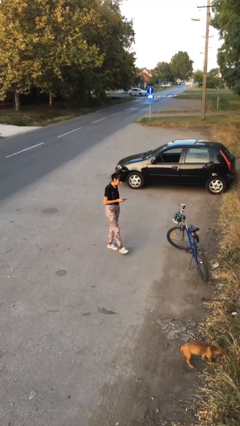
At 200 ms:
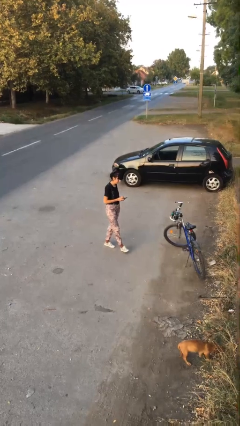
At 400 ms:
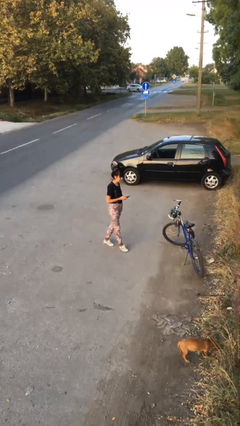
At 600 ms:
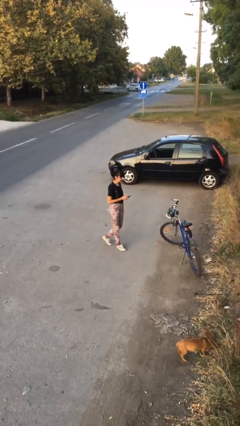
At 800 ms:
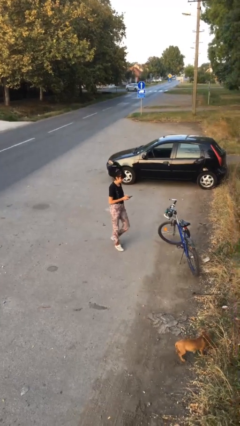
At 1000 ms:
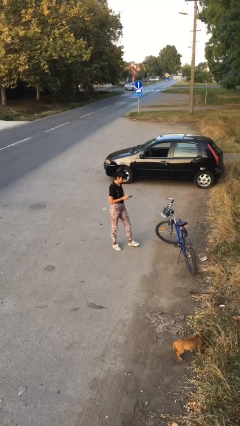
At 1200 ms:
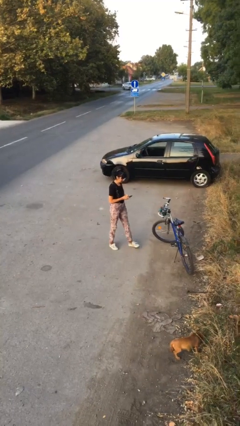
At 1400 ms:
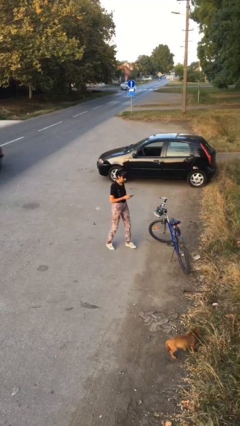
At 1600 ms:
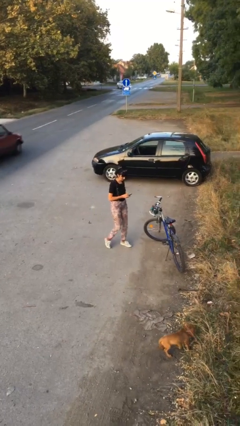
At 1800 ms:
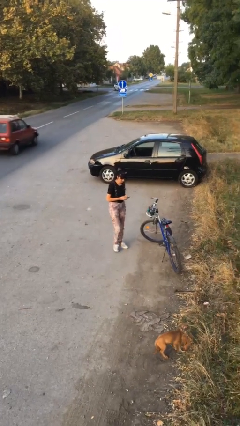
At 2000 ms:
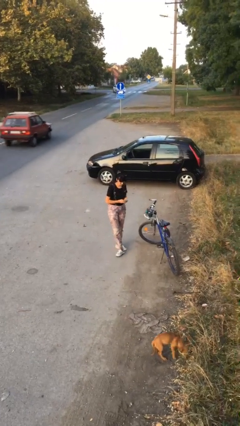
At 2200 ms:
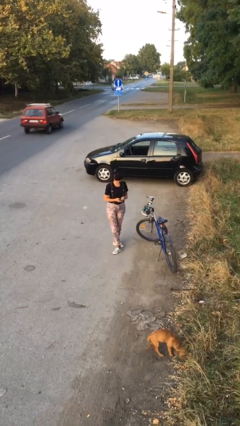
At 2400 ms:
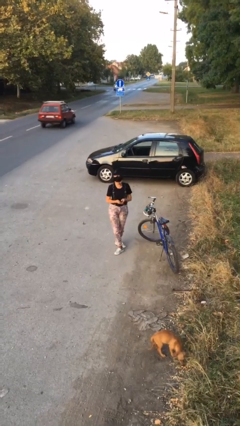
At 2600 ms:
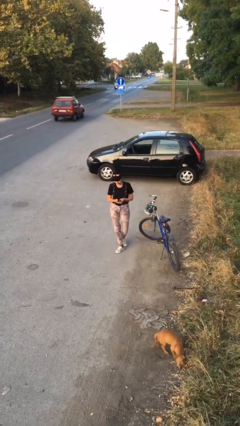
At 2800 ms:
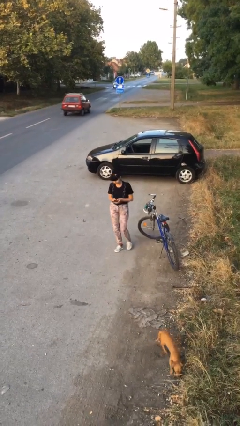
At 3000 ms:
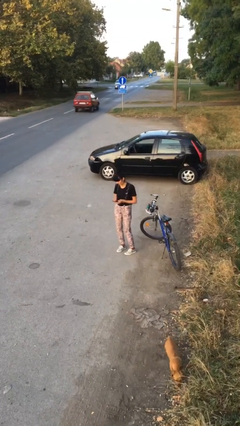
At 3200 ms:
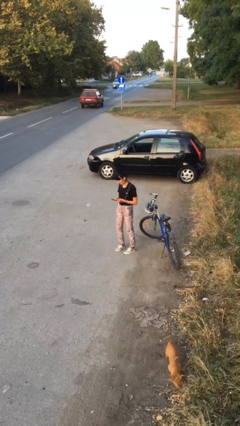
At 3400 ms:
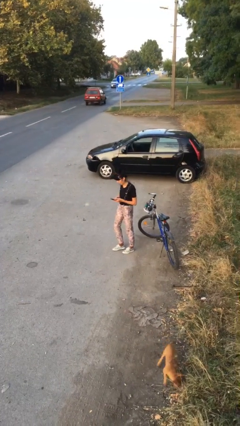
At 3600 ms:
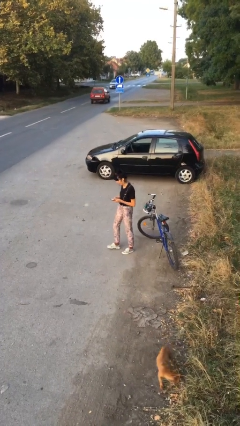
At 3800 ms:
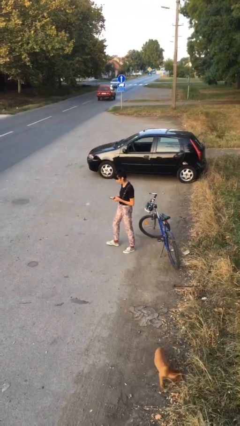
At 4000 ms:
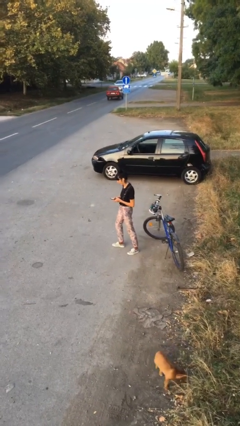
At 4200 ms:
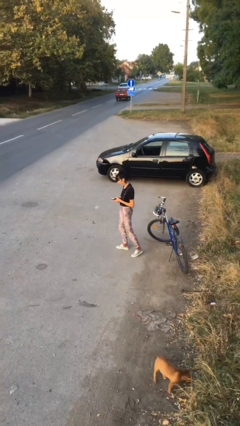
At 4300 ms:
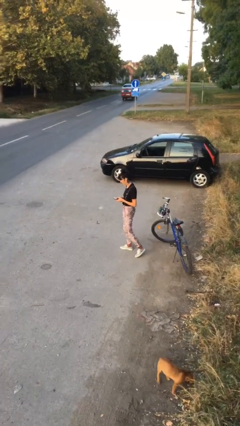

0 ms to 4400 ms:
person texts on phone

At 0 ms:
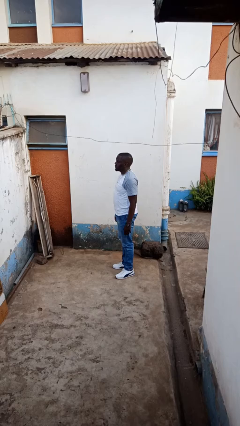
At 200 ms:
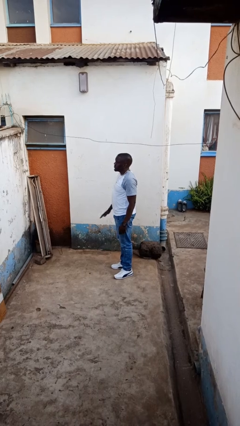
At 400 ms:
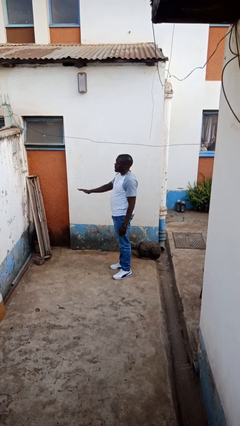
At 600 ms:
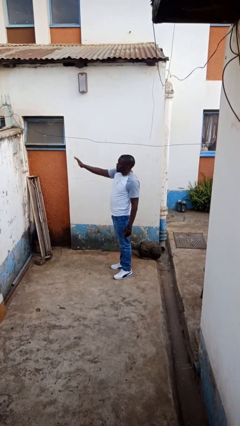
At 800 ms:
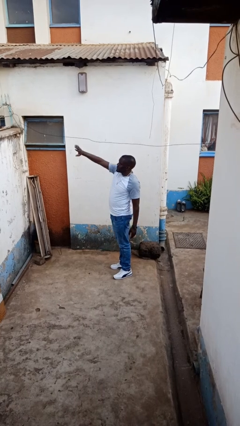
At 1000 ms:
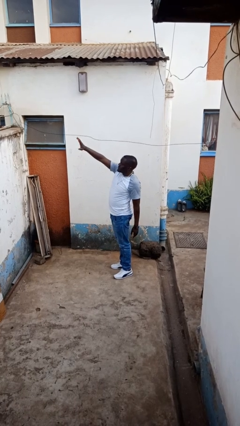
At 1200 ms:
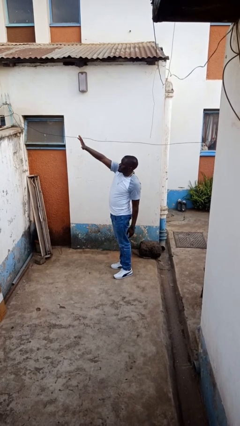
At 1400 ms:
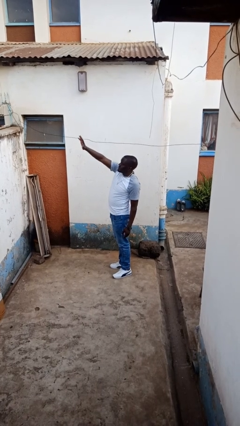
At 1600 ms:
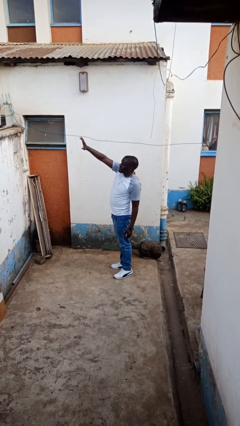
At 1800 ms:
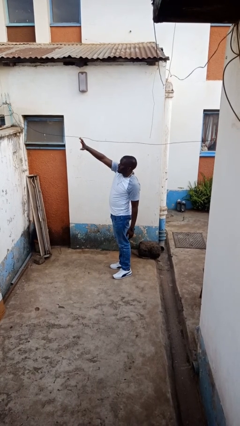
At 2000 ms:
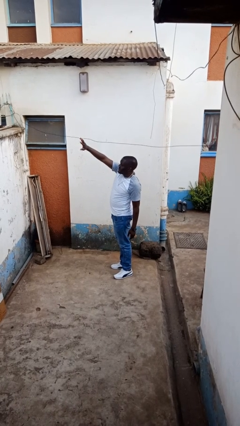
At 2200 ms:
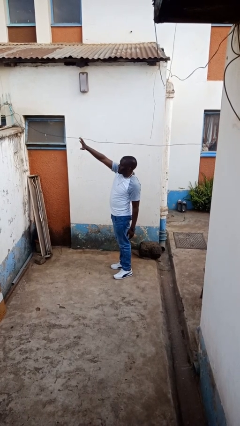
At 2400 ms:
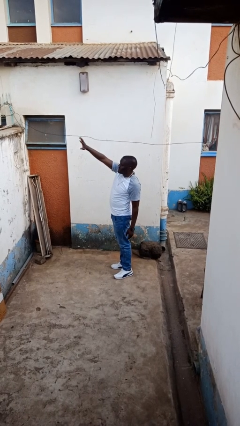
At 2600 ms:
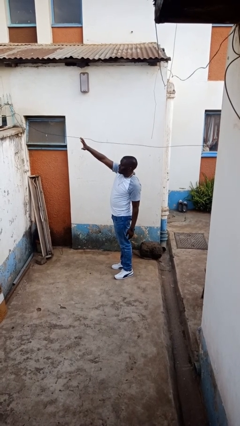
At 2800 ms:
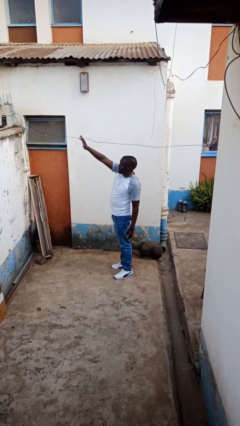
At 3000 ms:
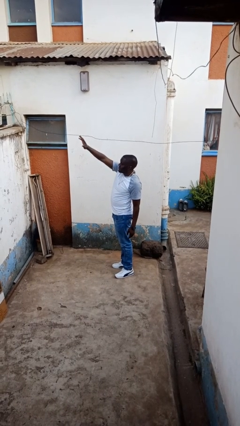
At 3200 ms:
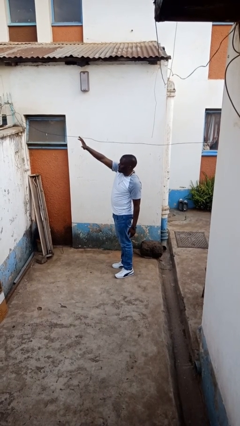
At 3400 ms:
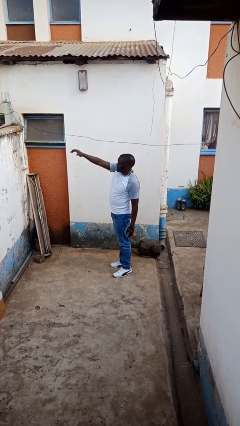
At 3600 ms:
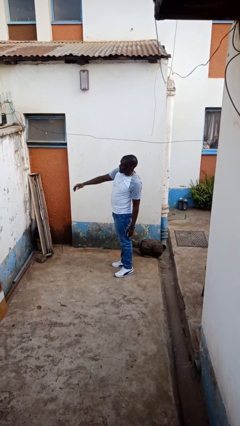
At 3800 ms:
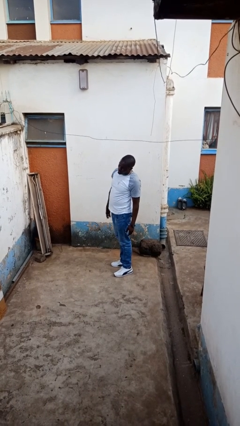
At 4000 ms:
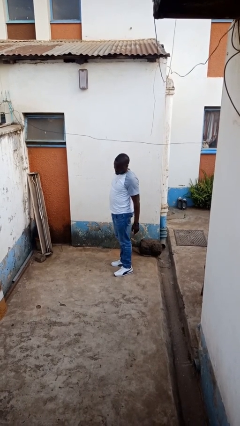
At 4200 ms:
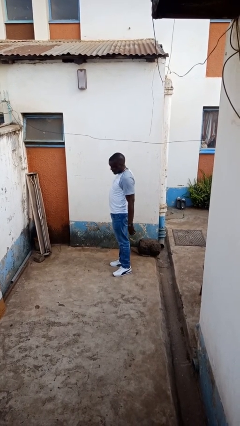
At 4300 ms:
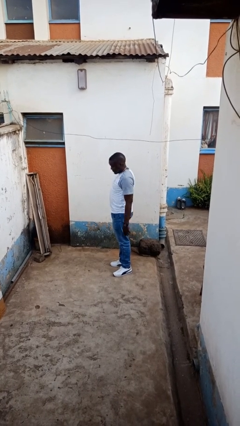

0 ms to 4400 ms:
person waves at person

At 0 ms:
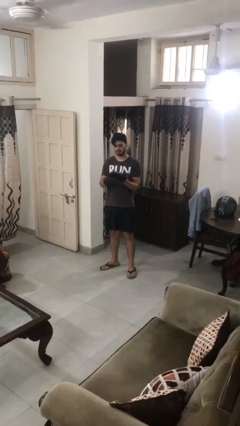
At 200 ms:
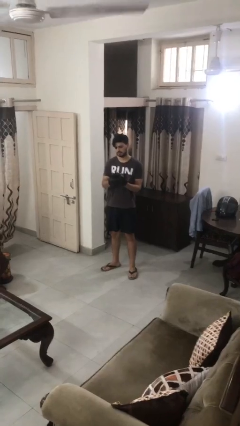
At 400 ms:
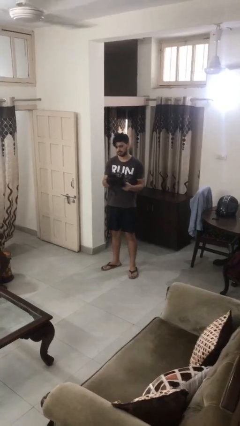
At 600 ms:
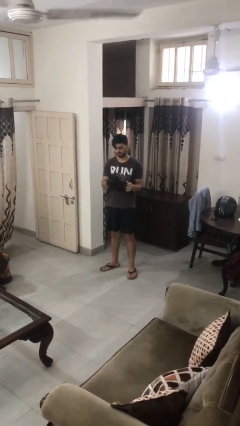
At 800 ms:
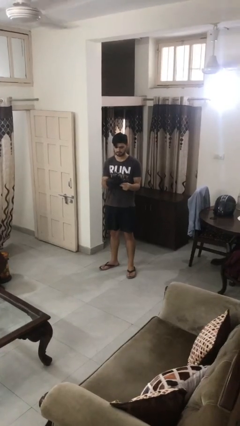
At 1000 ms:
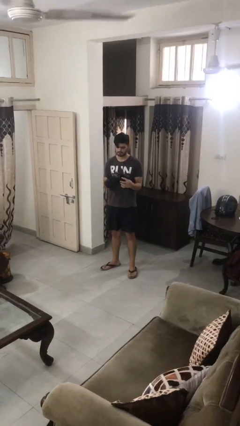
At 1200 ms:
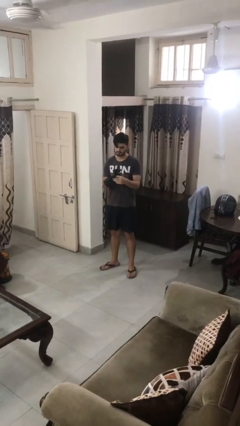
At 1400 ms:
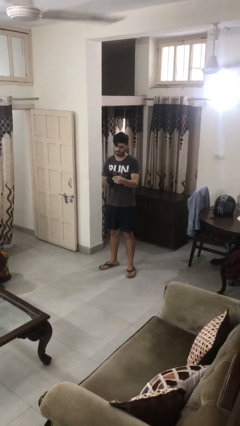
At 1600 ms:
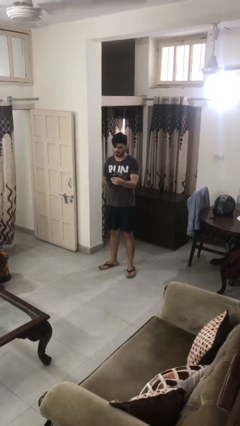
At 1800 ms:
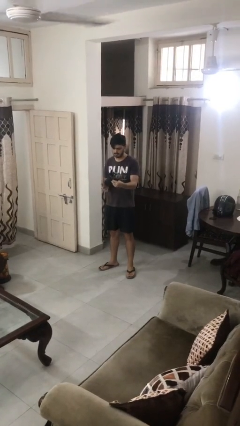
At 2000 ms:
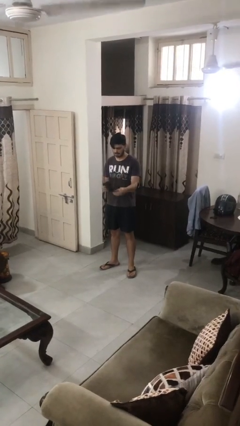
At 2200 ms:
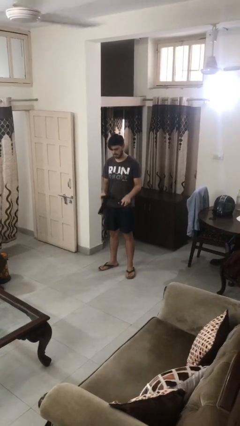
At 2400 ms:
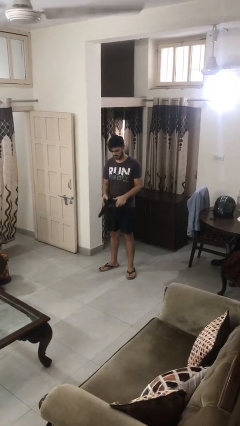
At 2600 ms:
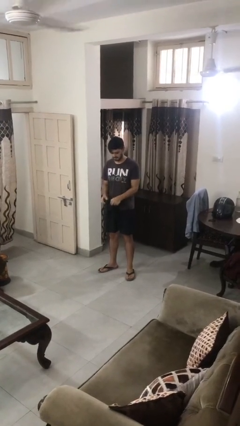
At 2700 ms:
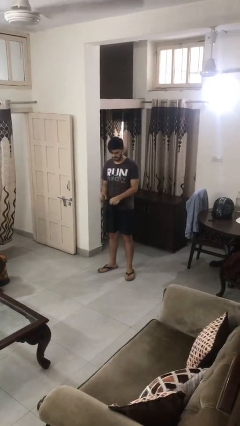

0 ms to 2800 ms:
person takes off gloves

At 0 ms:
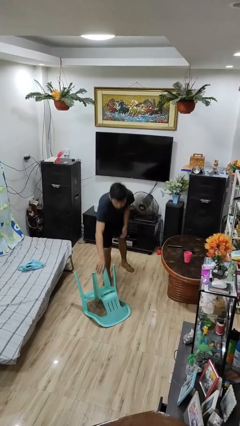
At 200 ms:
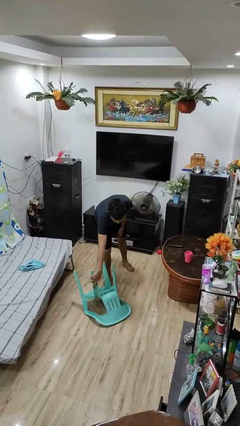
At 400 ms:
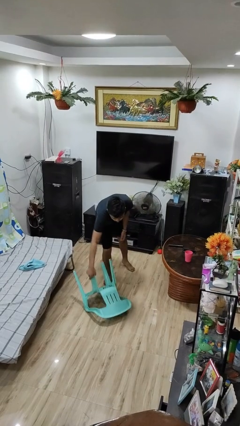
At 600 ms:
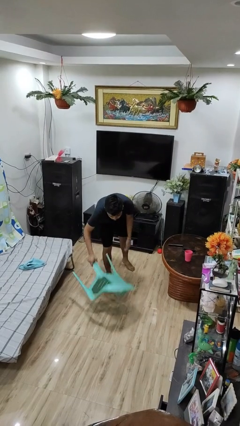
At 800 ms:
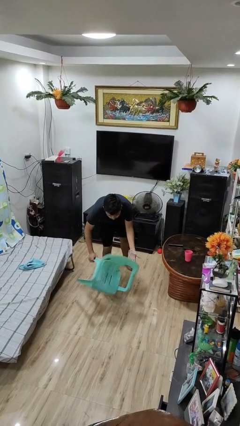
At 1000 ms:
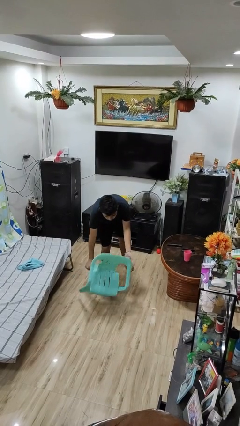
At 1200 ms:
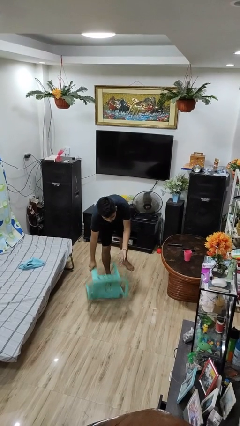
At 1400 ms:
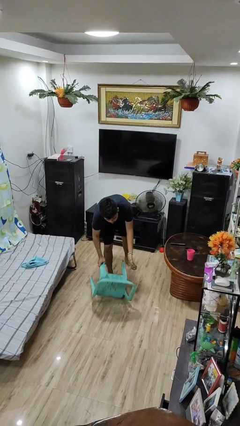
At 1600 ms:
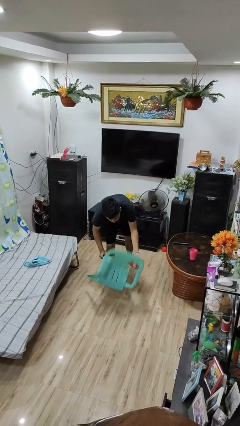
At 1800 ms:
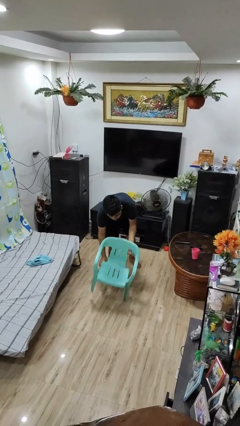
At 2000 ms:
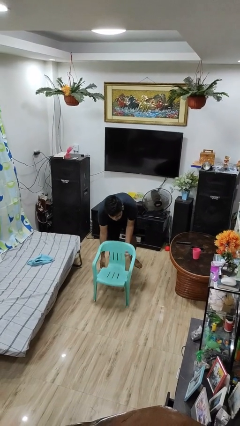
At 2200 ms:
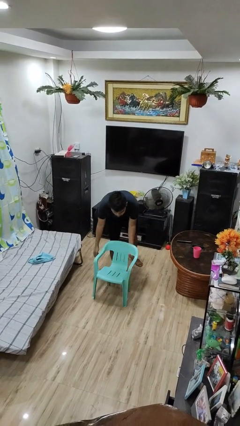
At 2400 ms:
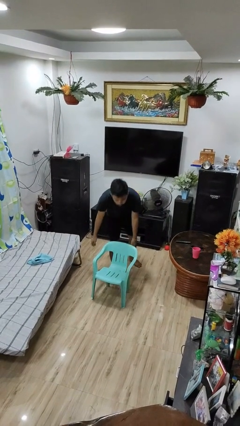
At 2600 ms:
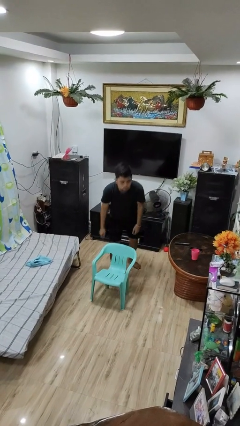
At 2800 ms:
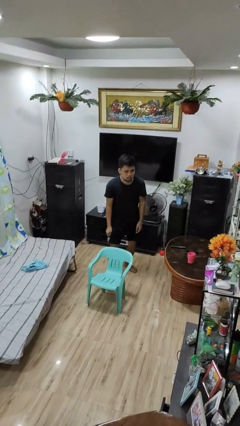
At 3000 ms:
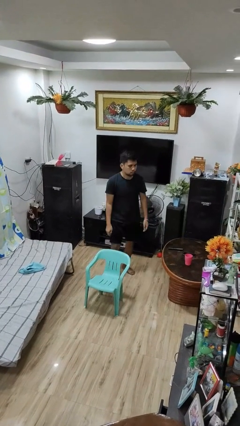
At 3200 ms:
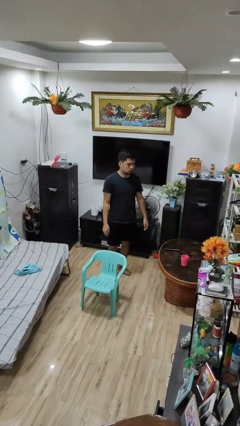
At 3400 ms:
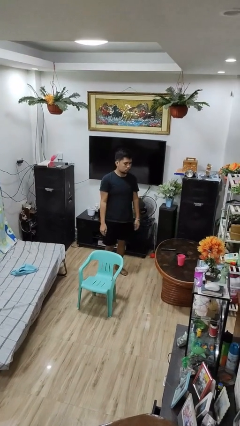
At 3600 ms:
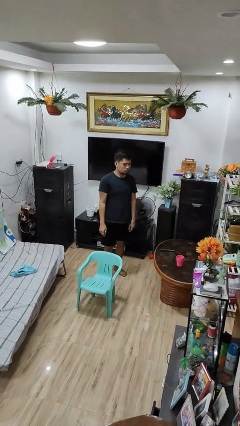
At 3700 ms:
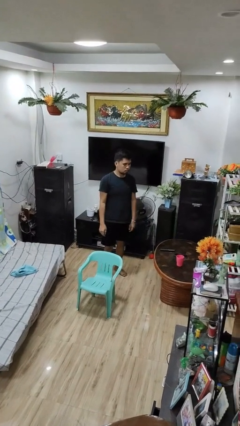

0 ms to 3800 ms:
person sets upright furniture

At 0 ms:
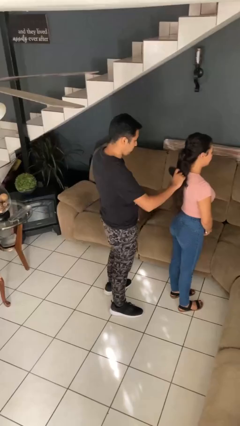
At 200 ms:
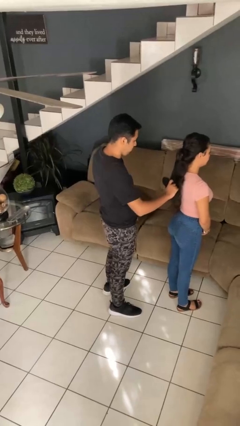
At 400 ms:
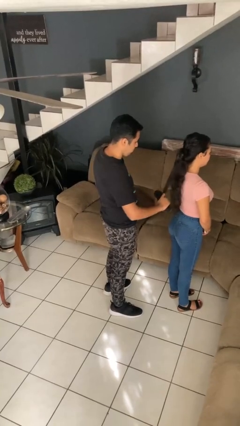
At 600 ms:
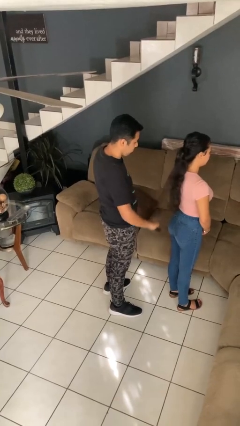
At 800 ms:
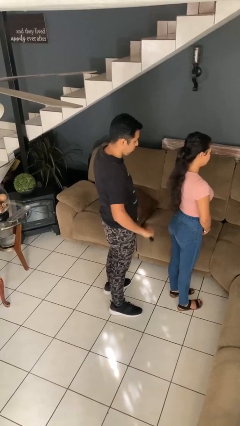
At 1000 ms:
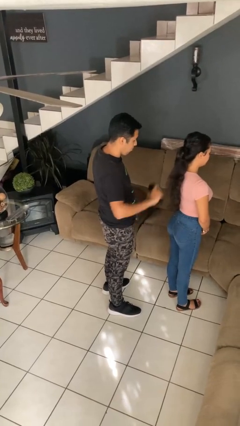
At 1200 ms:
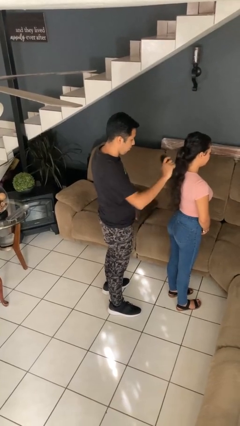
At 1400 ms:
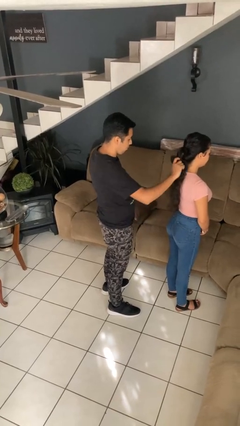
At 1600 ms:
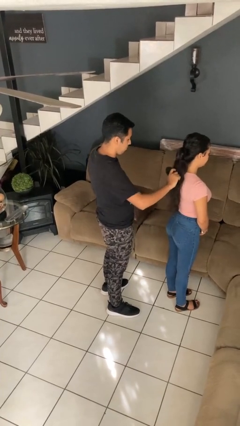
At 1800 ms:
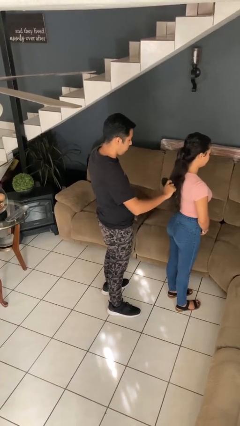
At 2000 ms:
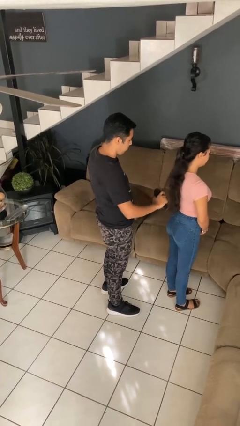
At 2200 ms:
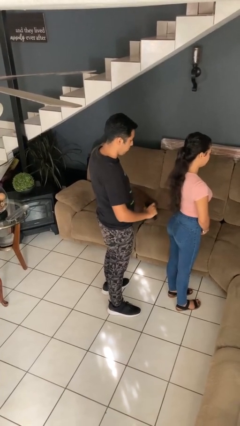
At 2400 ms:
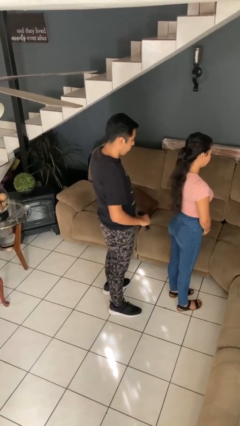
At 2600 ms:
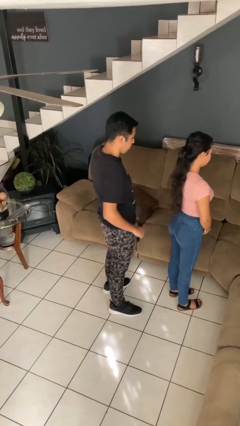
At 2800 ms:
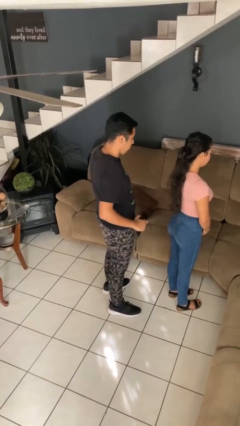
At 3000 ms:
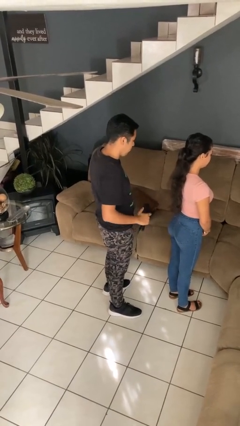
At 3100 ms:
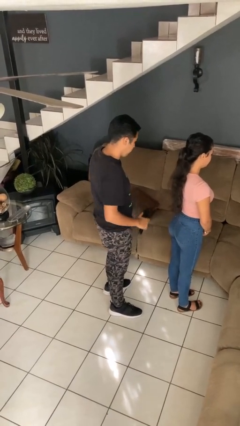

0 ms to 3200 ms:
person brushes hair of person